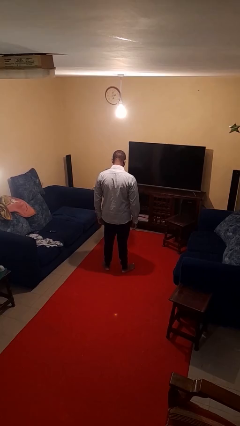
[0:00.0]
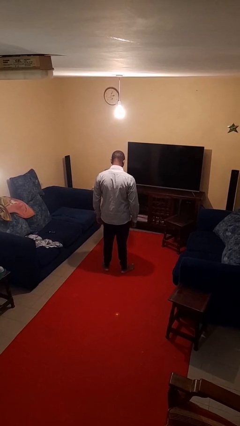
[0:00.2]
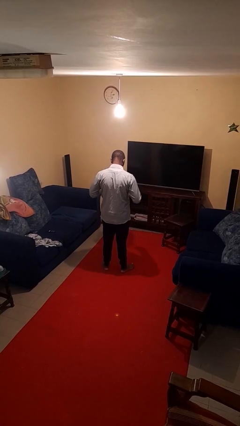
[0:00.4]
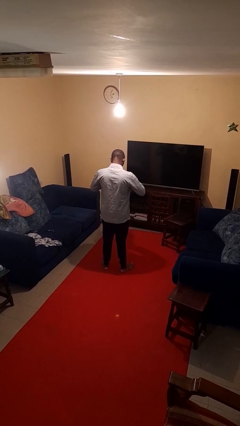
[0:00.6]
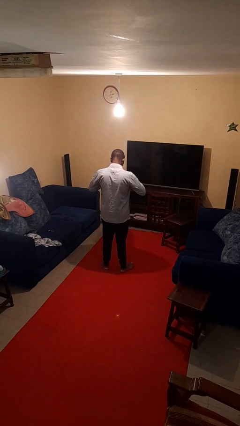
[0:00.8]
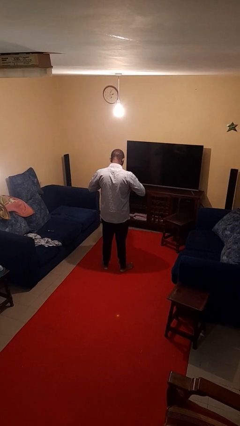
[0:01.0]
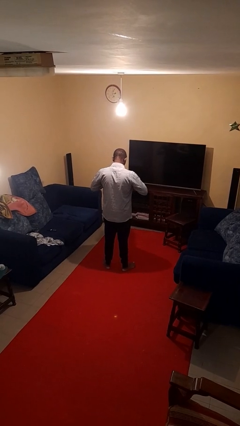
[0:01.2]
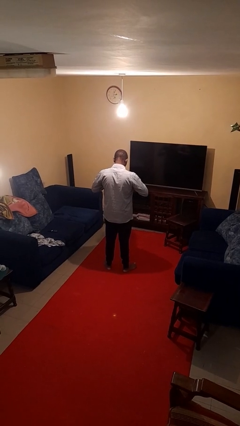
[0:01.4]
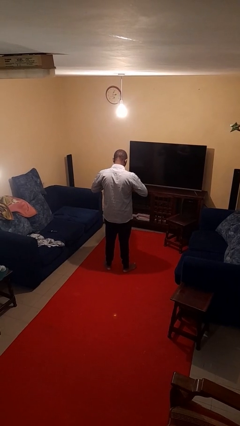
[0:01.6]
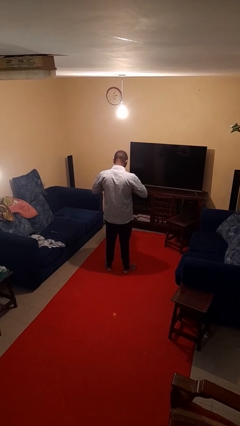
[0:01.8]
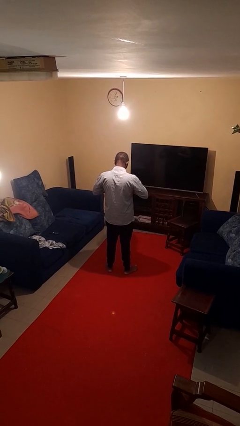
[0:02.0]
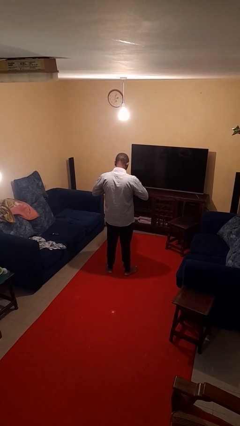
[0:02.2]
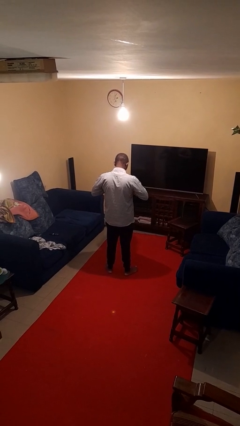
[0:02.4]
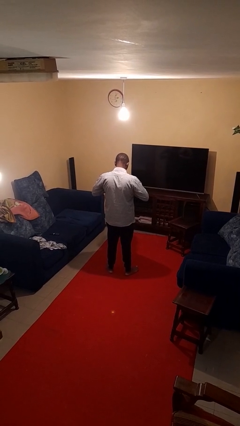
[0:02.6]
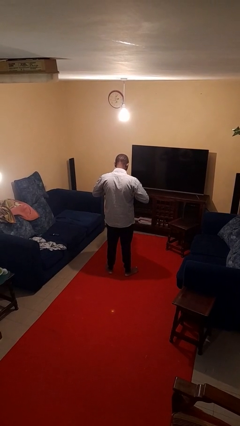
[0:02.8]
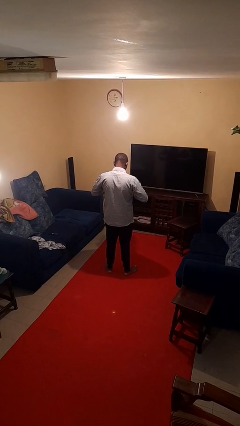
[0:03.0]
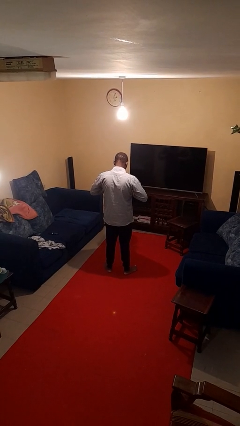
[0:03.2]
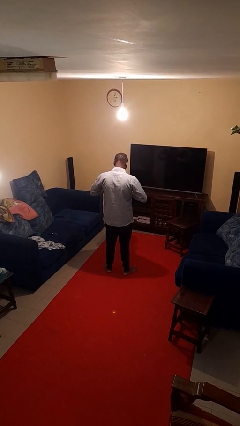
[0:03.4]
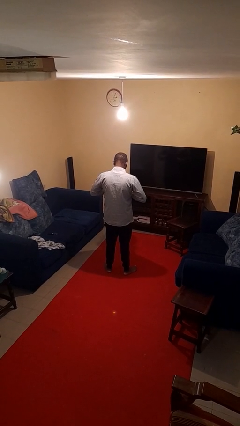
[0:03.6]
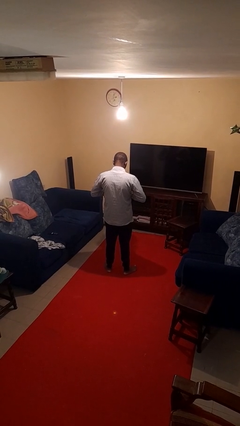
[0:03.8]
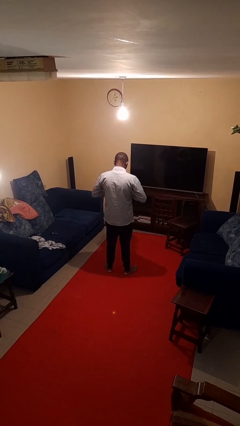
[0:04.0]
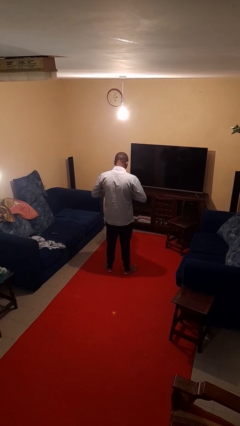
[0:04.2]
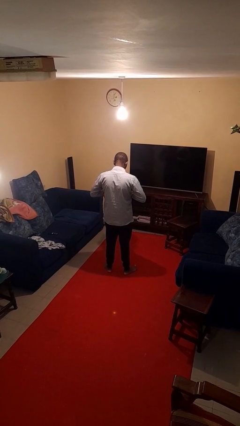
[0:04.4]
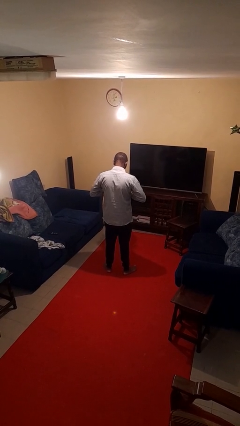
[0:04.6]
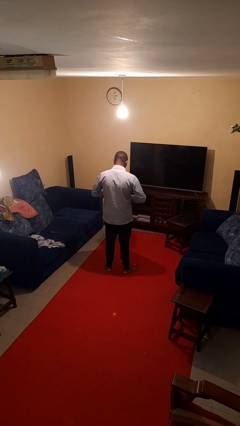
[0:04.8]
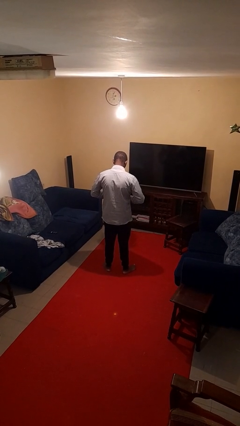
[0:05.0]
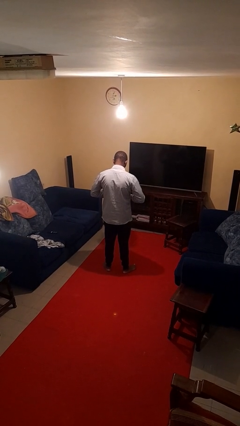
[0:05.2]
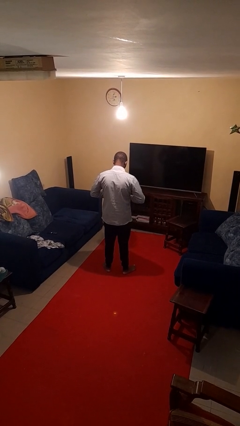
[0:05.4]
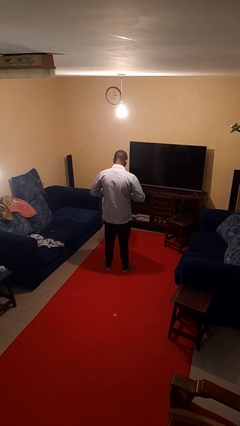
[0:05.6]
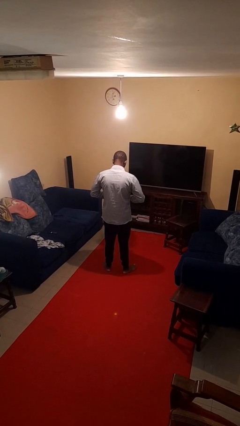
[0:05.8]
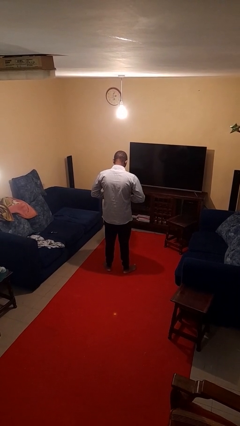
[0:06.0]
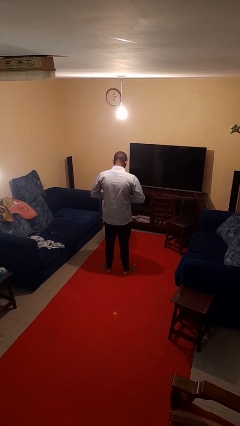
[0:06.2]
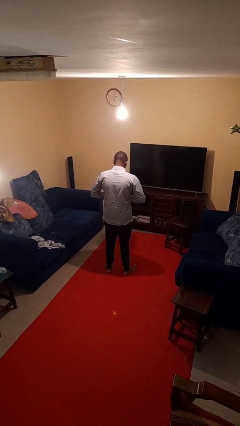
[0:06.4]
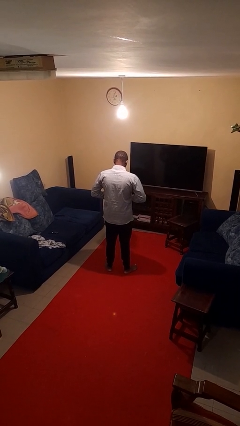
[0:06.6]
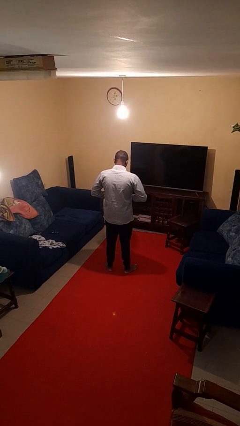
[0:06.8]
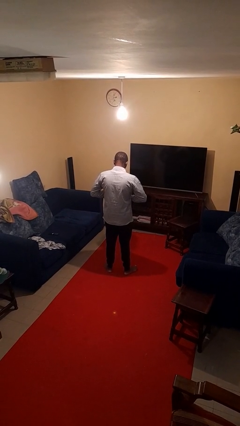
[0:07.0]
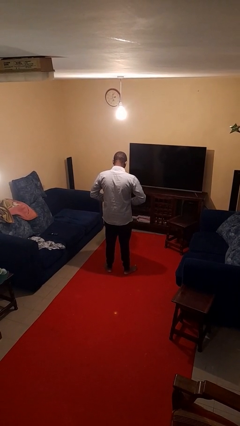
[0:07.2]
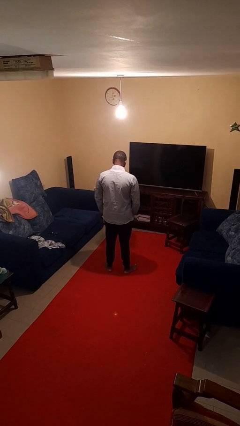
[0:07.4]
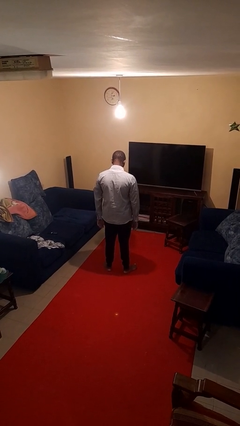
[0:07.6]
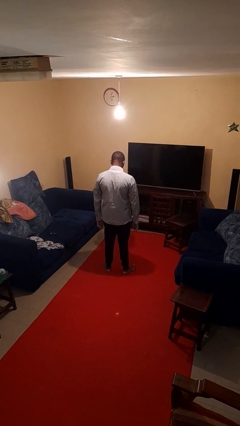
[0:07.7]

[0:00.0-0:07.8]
person buttons shirt

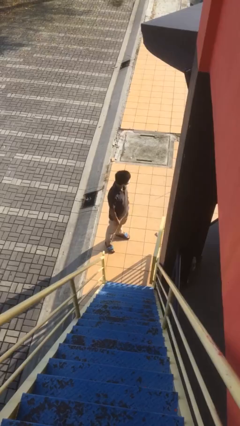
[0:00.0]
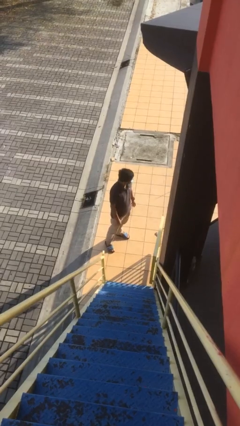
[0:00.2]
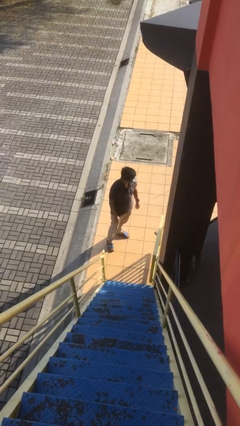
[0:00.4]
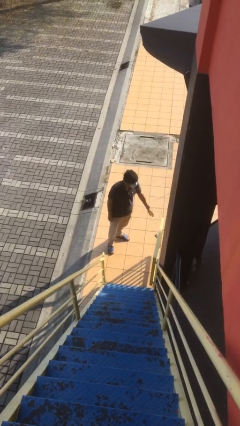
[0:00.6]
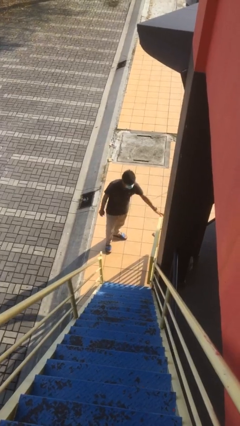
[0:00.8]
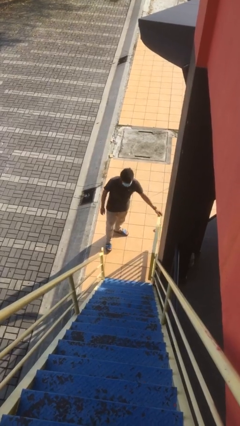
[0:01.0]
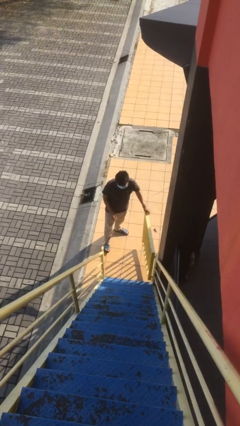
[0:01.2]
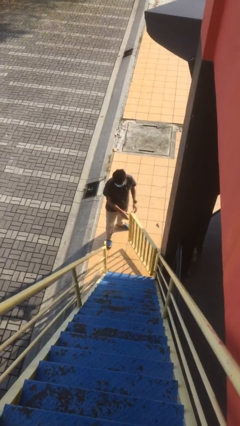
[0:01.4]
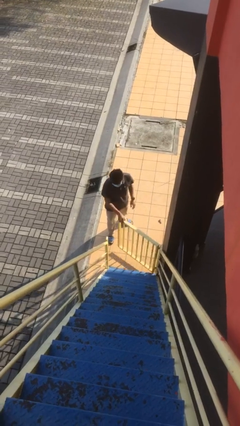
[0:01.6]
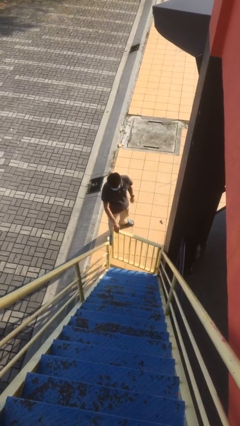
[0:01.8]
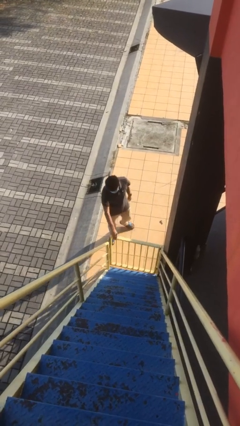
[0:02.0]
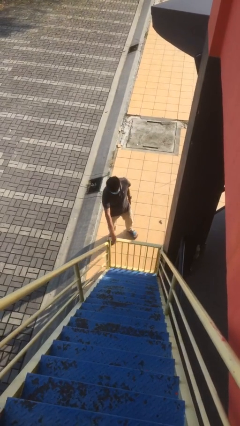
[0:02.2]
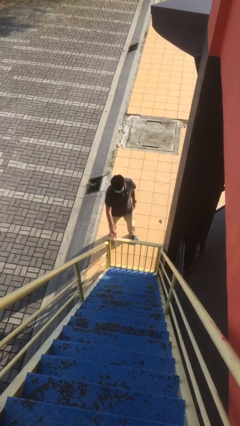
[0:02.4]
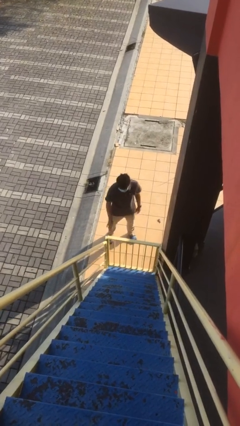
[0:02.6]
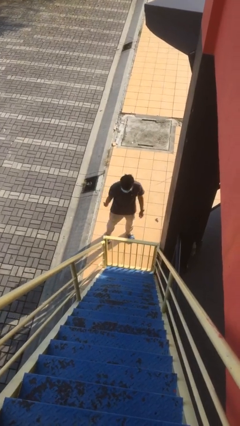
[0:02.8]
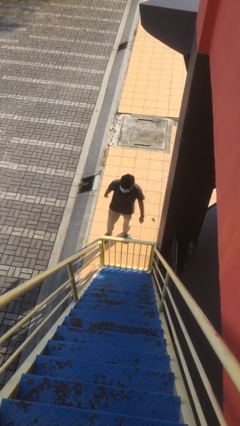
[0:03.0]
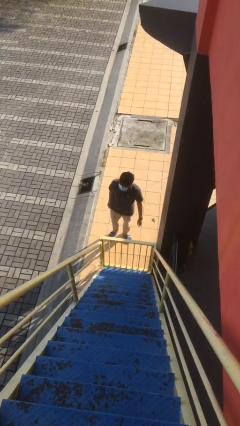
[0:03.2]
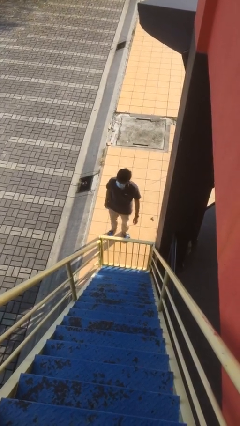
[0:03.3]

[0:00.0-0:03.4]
person closes facility door

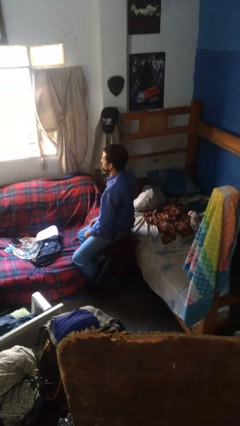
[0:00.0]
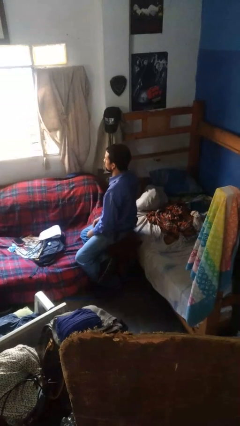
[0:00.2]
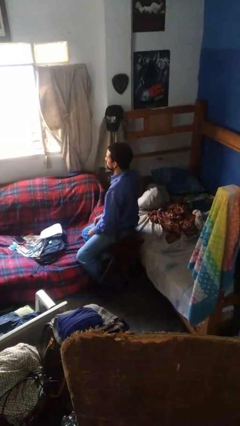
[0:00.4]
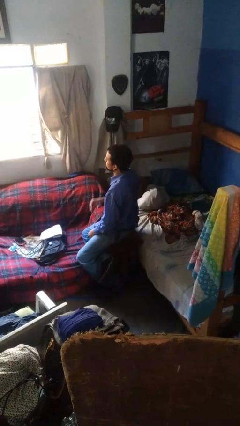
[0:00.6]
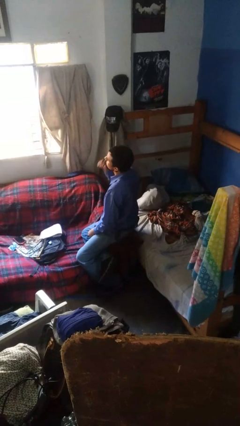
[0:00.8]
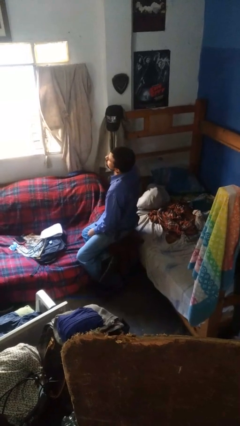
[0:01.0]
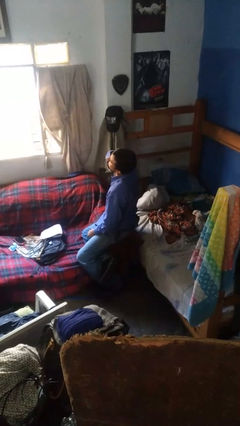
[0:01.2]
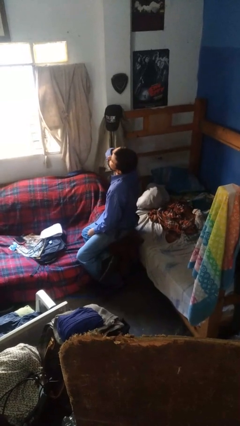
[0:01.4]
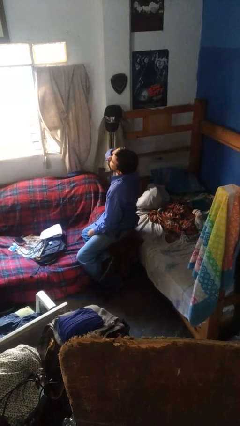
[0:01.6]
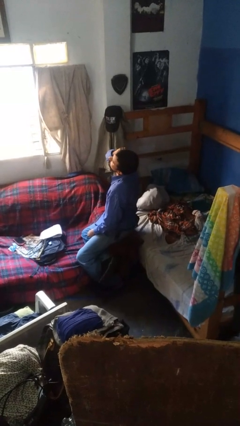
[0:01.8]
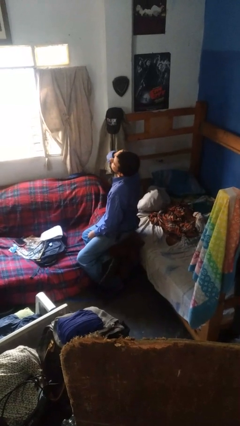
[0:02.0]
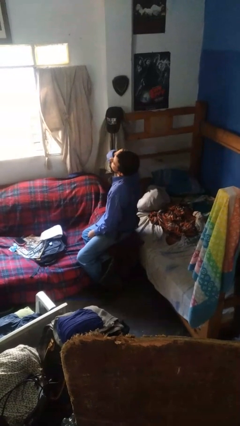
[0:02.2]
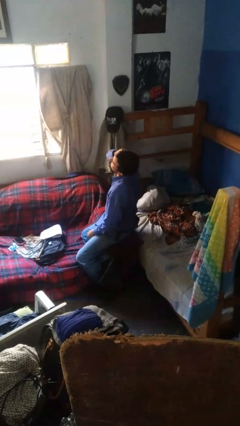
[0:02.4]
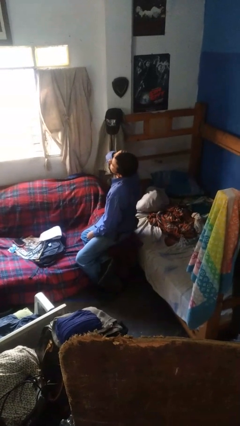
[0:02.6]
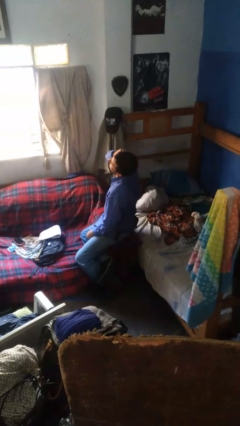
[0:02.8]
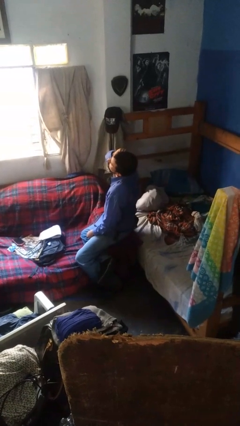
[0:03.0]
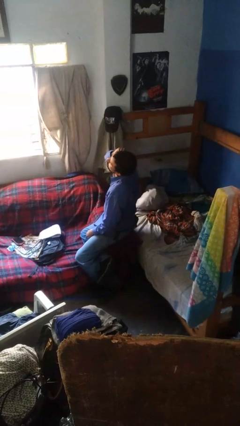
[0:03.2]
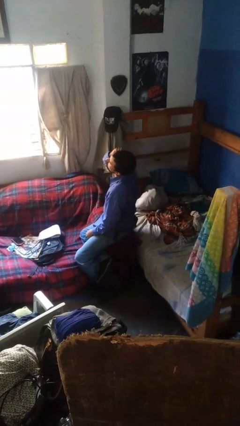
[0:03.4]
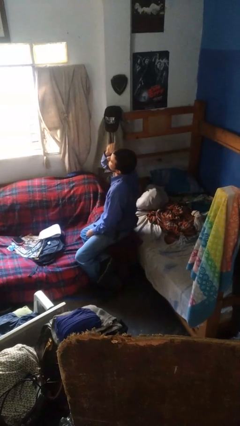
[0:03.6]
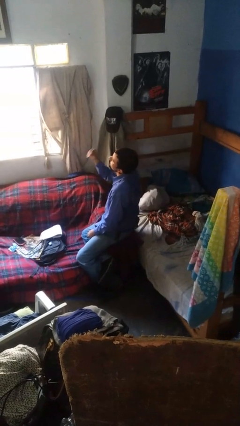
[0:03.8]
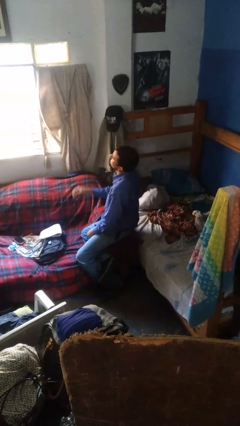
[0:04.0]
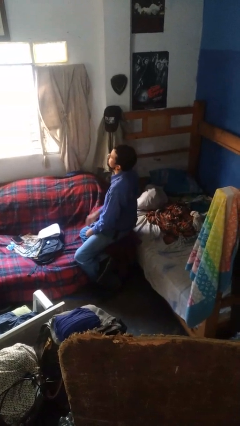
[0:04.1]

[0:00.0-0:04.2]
person touches earlobe

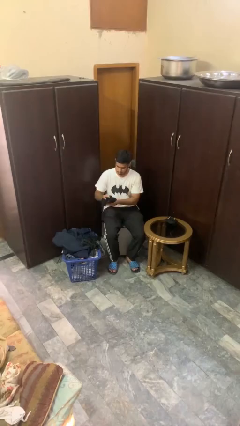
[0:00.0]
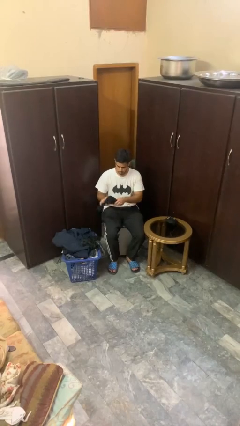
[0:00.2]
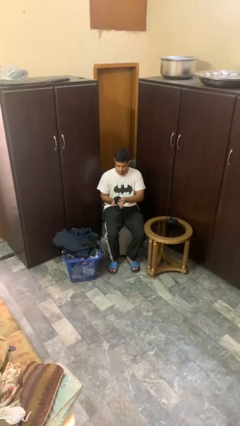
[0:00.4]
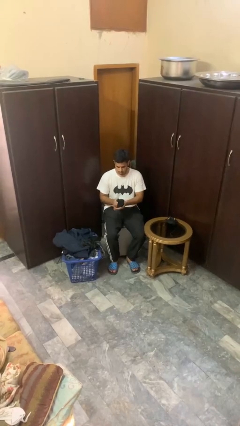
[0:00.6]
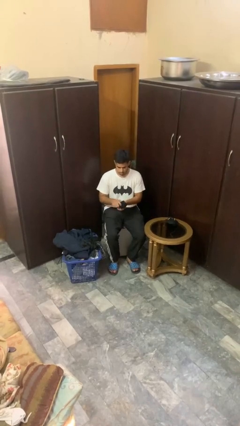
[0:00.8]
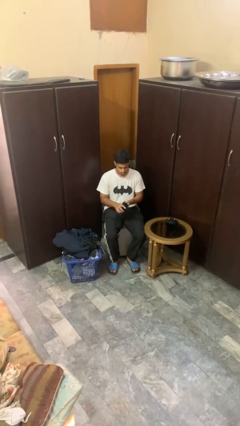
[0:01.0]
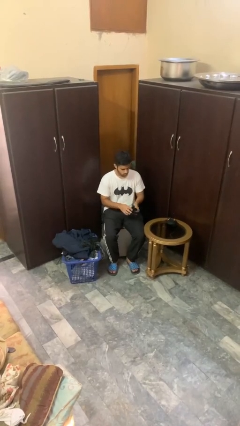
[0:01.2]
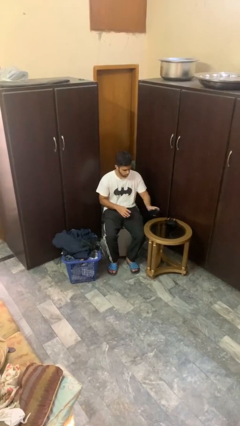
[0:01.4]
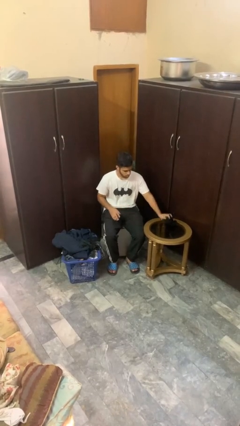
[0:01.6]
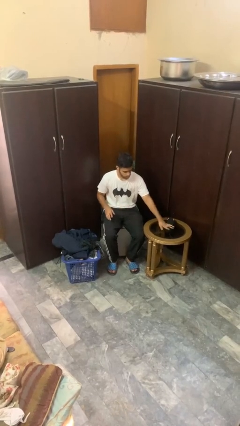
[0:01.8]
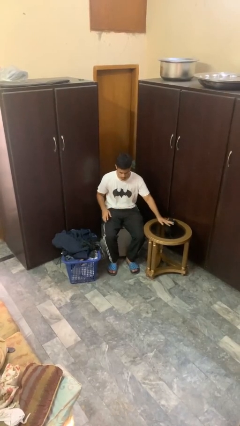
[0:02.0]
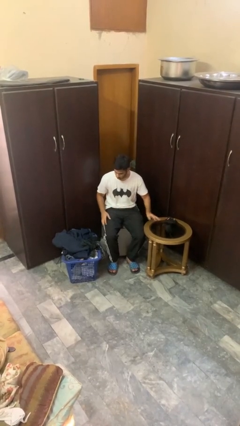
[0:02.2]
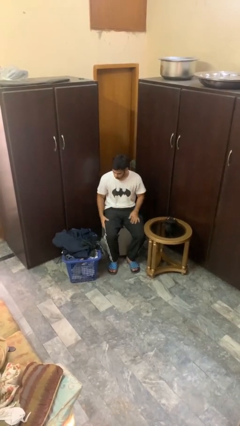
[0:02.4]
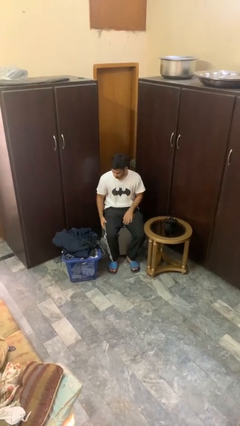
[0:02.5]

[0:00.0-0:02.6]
person folds socks
